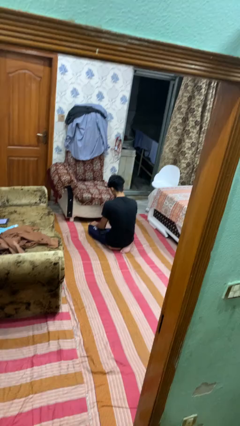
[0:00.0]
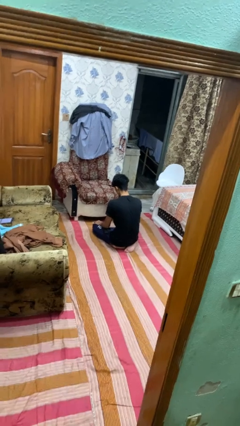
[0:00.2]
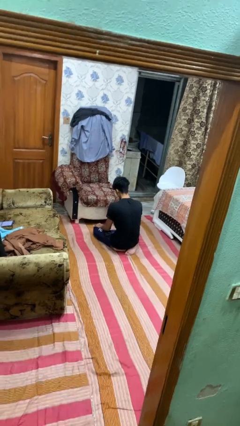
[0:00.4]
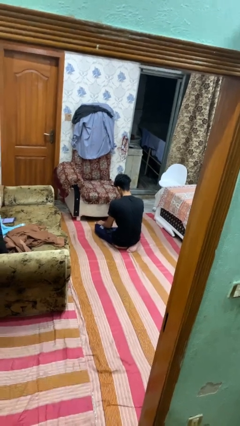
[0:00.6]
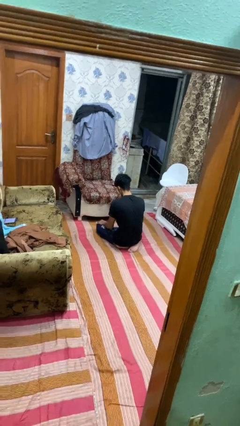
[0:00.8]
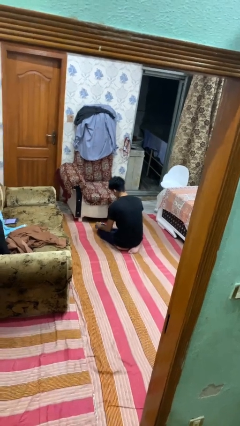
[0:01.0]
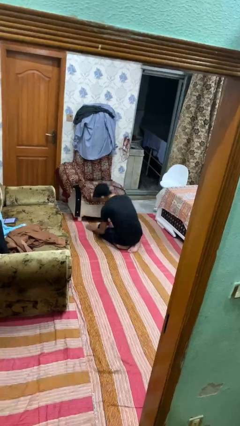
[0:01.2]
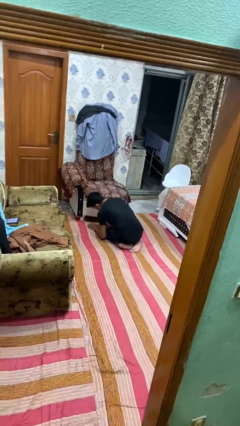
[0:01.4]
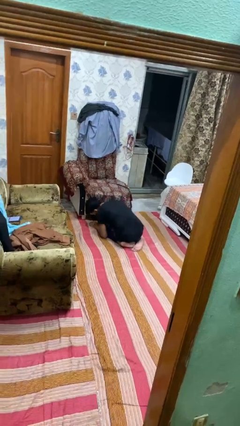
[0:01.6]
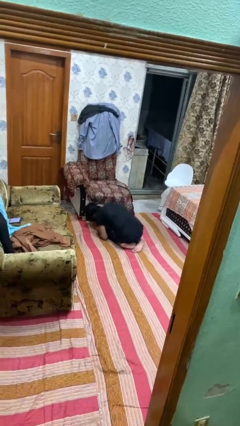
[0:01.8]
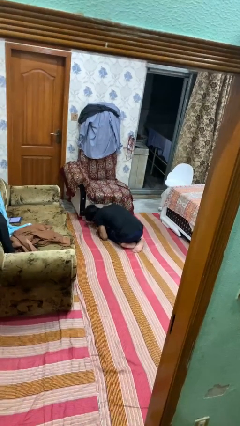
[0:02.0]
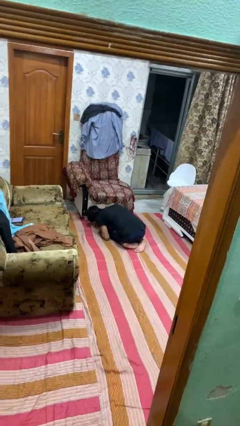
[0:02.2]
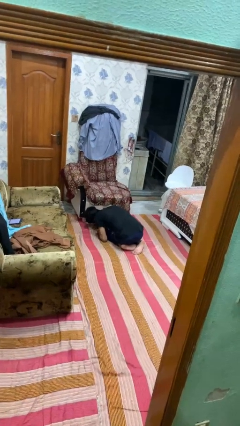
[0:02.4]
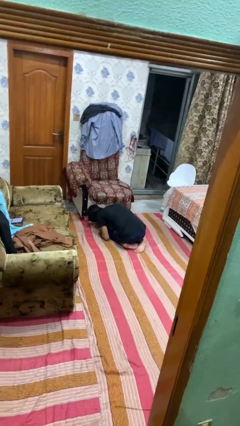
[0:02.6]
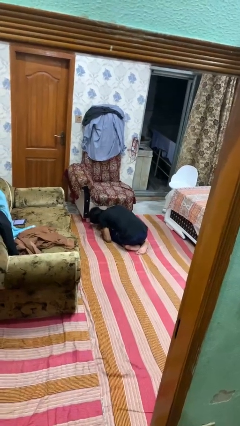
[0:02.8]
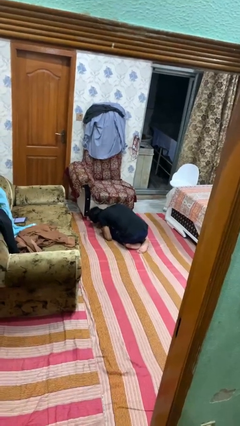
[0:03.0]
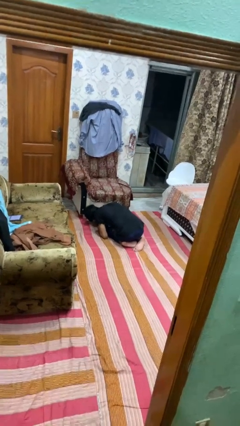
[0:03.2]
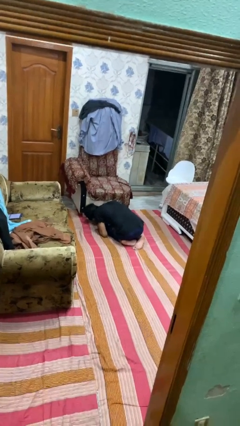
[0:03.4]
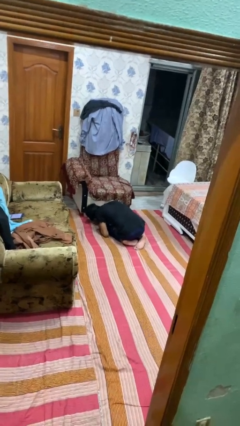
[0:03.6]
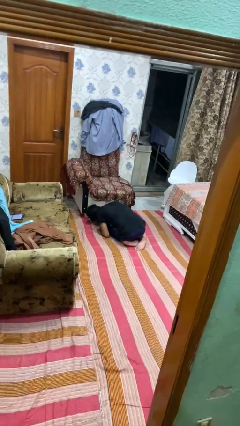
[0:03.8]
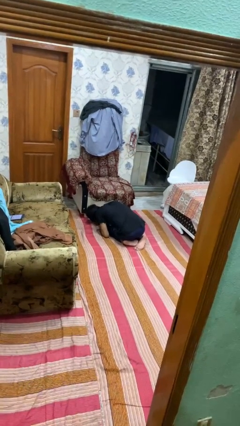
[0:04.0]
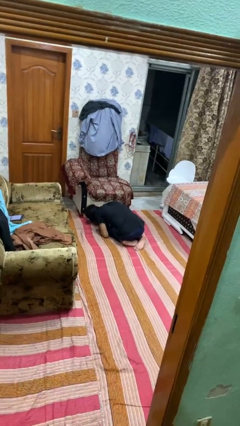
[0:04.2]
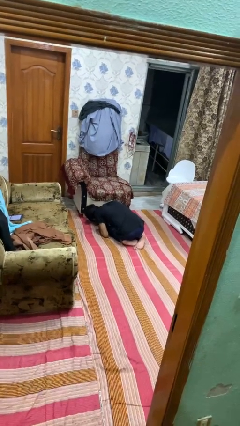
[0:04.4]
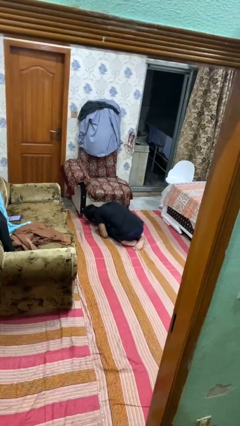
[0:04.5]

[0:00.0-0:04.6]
person searches under couch

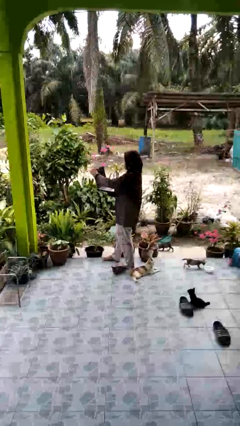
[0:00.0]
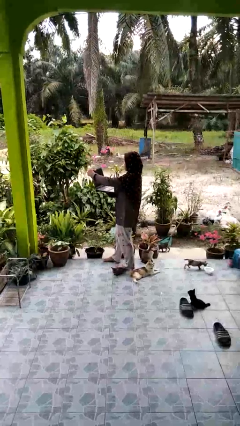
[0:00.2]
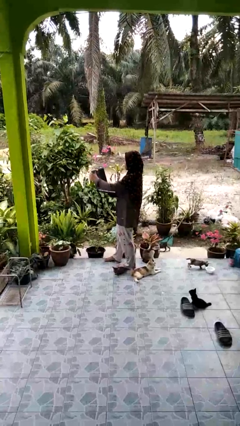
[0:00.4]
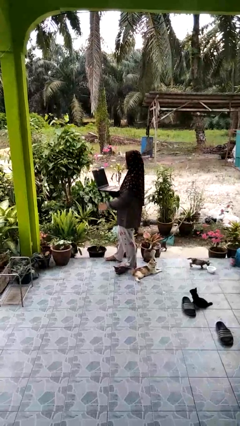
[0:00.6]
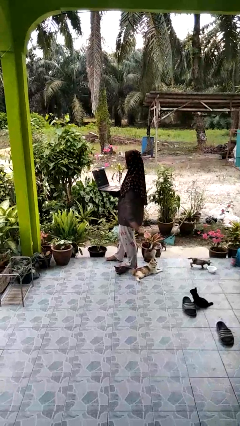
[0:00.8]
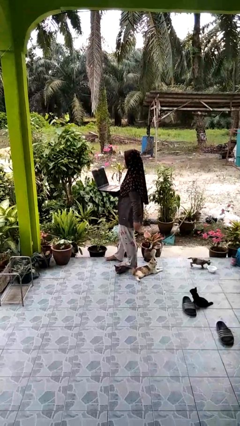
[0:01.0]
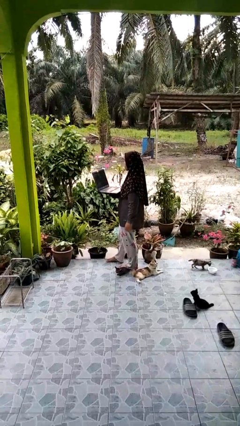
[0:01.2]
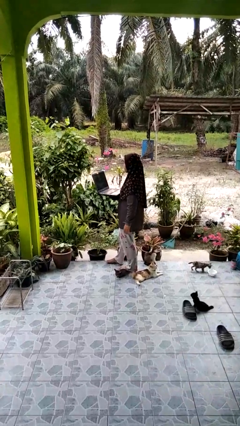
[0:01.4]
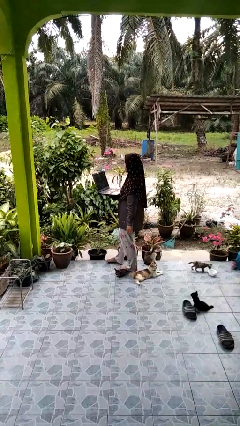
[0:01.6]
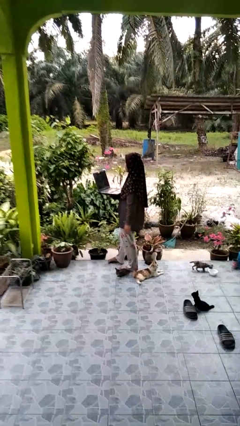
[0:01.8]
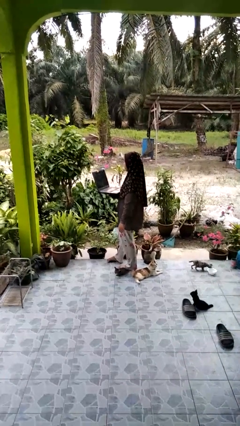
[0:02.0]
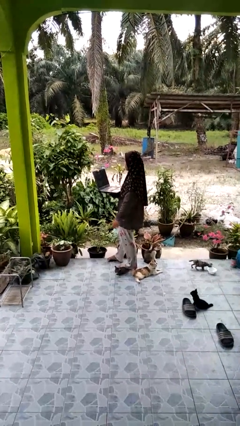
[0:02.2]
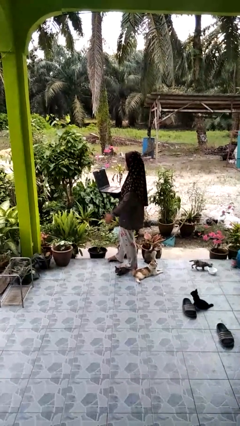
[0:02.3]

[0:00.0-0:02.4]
person opens laptop

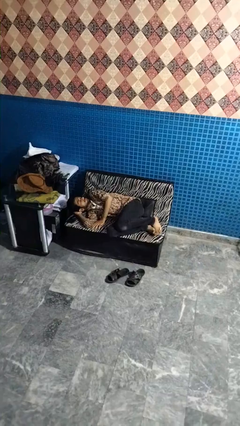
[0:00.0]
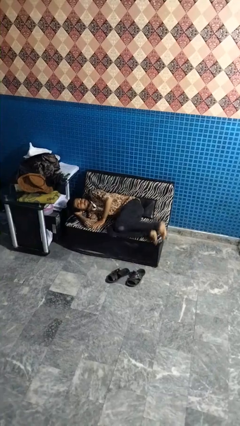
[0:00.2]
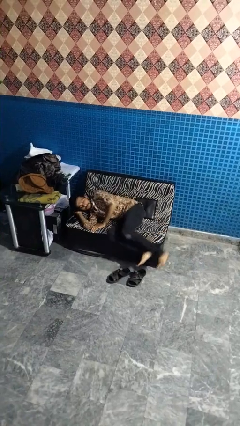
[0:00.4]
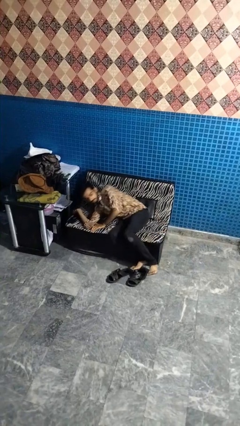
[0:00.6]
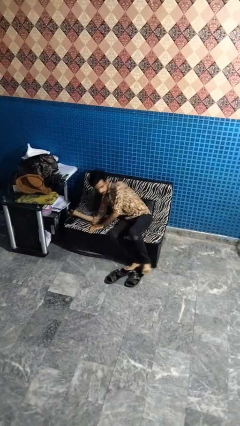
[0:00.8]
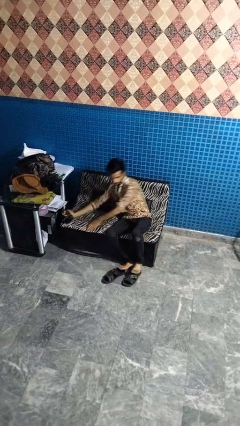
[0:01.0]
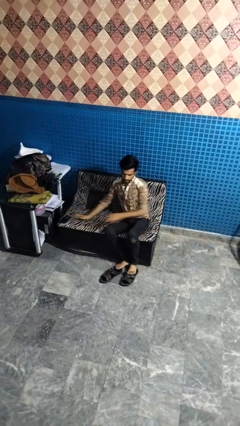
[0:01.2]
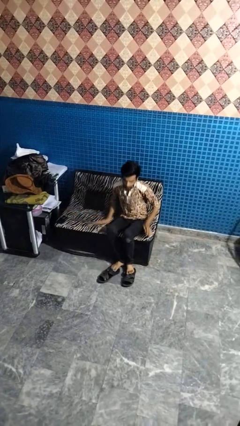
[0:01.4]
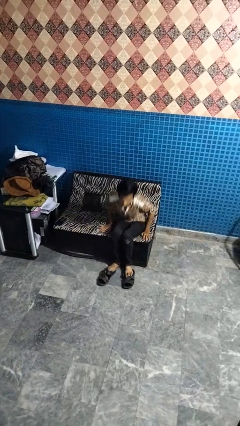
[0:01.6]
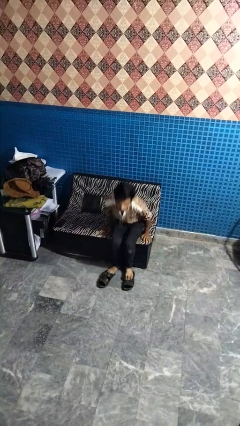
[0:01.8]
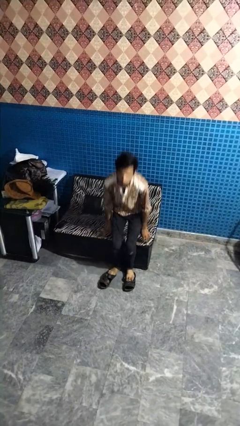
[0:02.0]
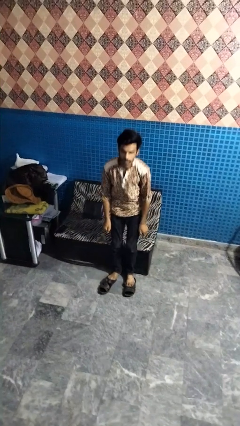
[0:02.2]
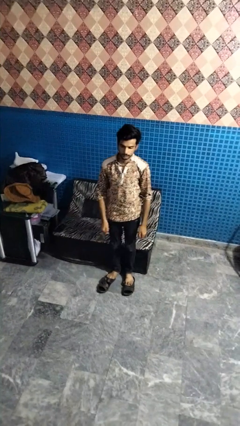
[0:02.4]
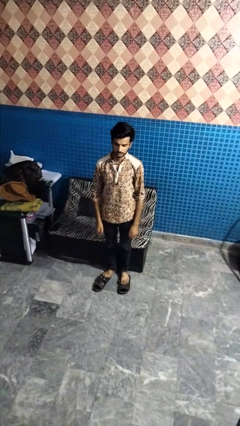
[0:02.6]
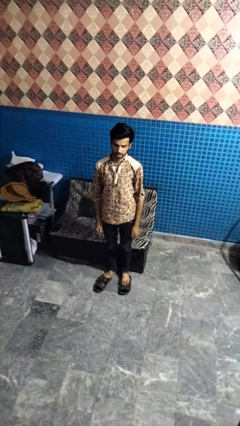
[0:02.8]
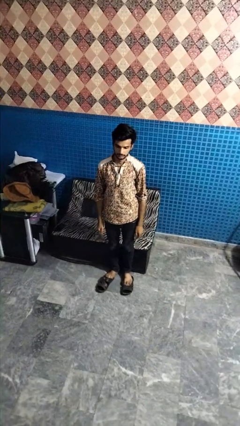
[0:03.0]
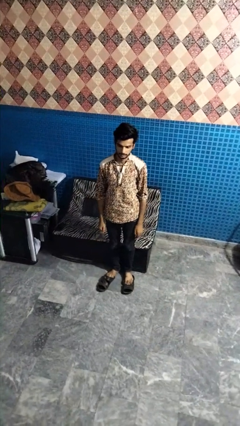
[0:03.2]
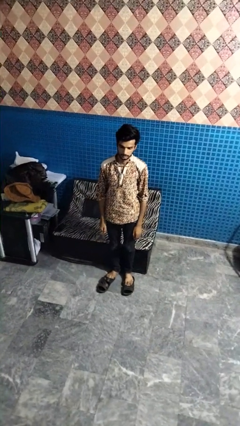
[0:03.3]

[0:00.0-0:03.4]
person stands up

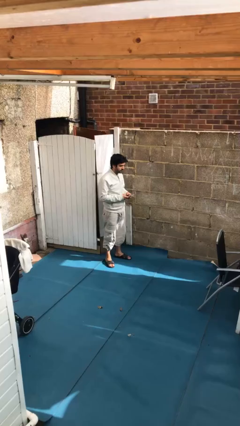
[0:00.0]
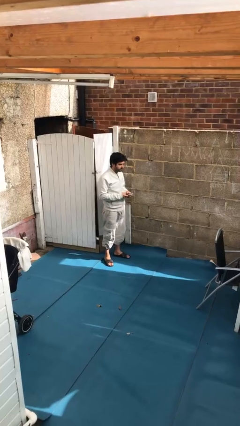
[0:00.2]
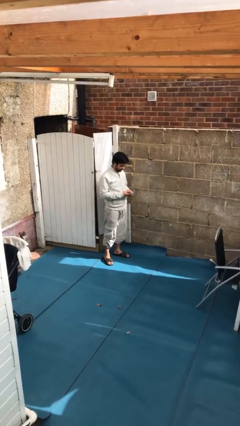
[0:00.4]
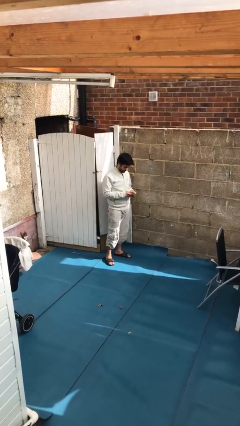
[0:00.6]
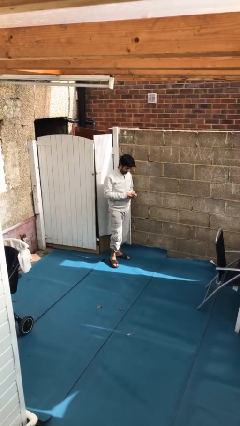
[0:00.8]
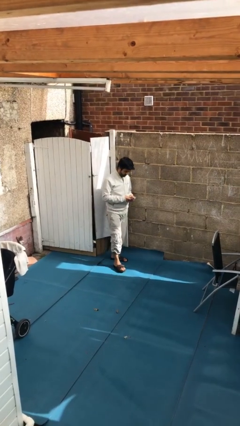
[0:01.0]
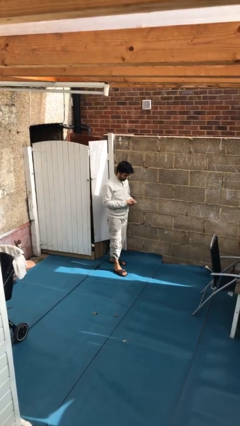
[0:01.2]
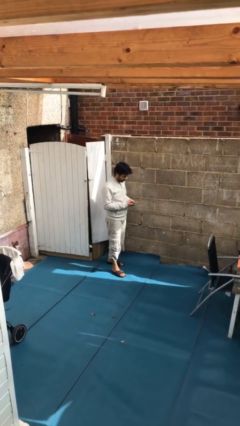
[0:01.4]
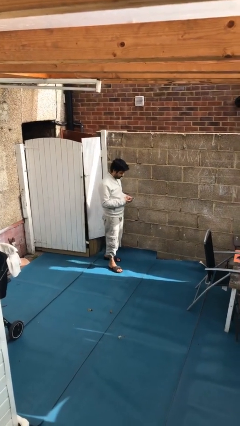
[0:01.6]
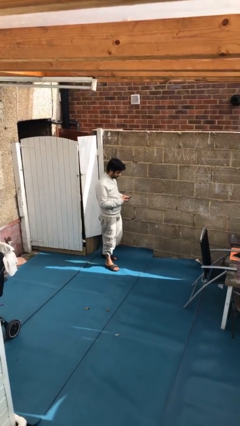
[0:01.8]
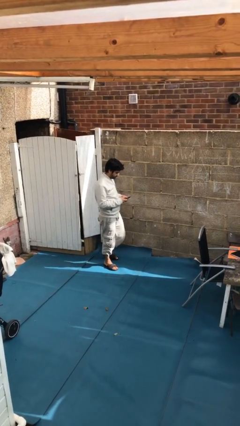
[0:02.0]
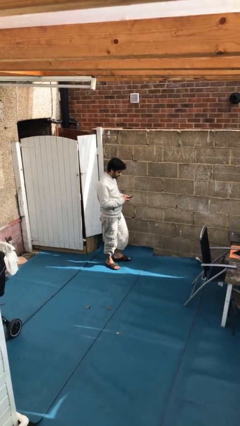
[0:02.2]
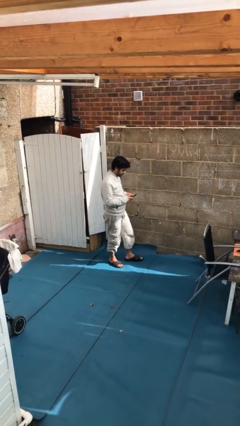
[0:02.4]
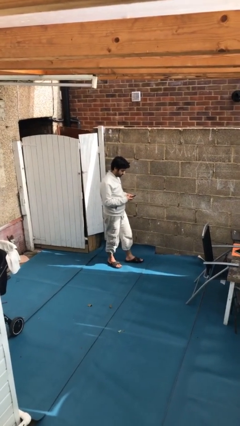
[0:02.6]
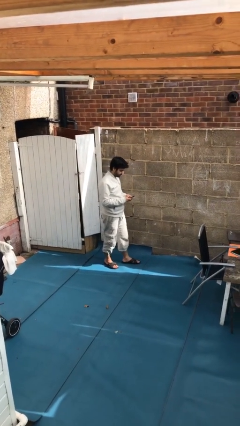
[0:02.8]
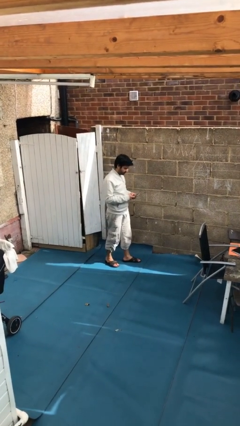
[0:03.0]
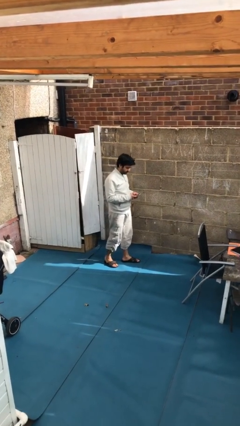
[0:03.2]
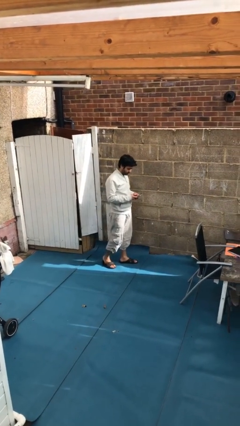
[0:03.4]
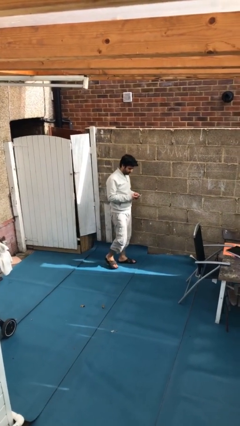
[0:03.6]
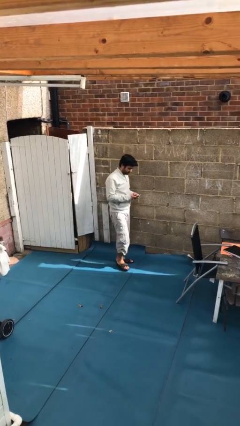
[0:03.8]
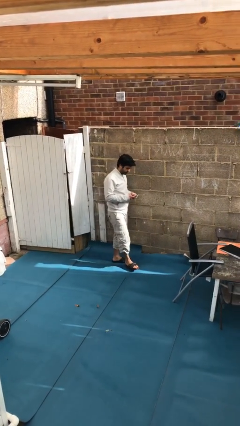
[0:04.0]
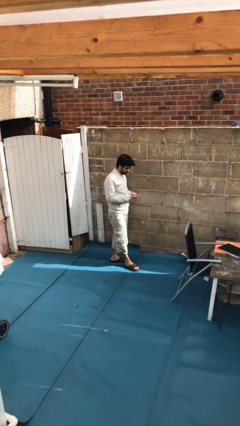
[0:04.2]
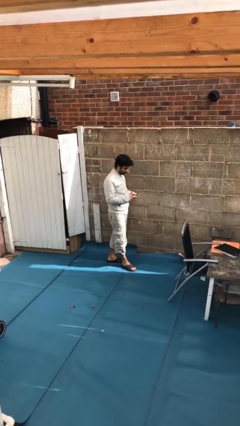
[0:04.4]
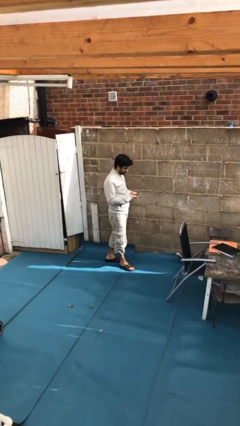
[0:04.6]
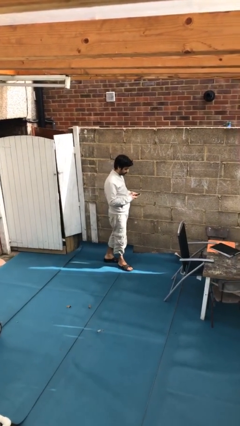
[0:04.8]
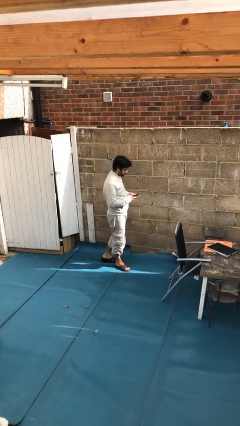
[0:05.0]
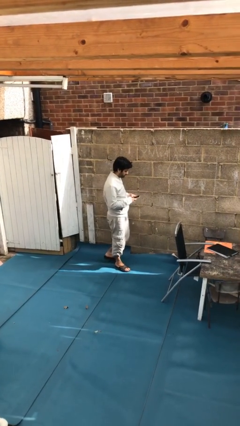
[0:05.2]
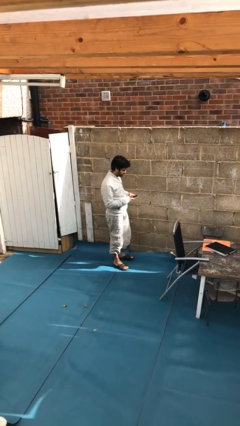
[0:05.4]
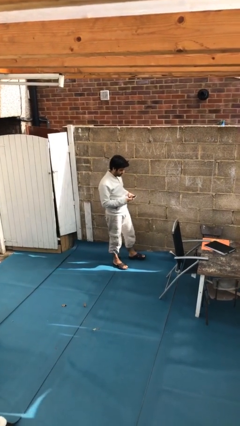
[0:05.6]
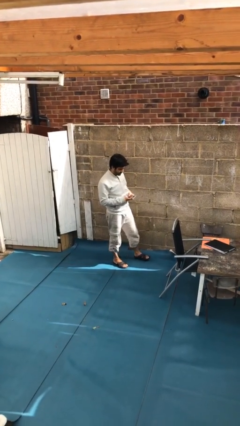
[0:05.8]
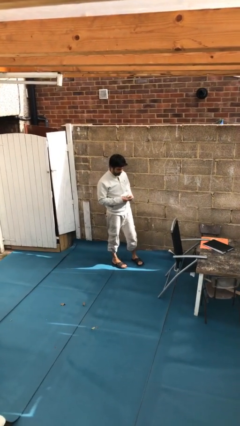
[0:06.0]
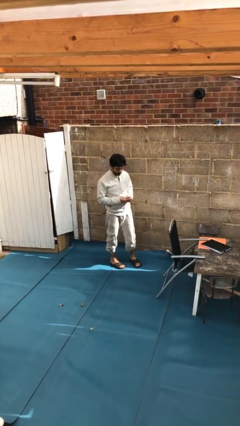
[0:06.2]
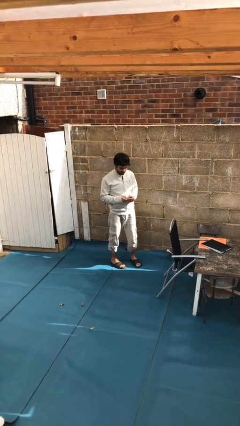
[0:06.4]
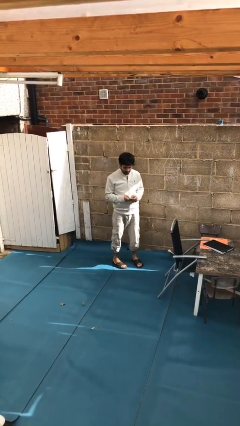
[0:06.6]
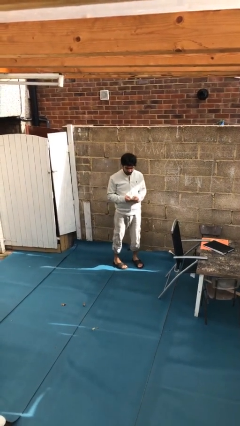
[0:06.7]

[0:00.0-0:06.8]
person texts on phone

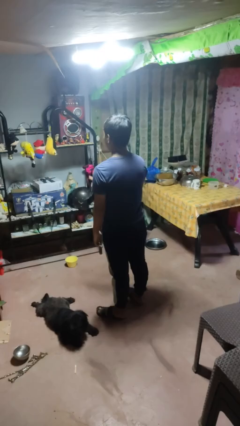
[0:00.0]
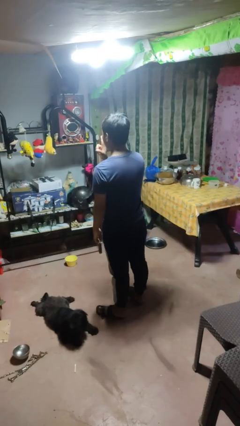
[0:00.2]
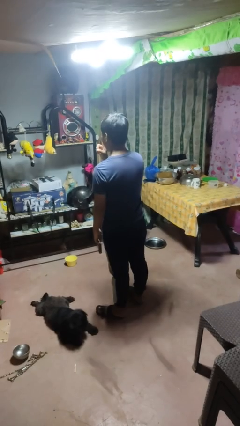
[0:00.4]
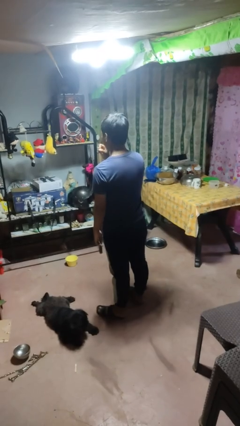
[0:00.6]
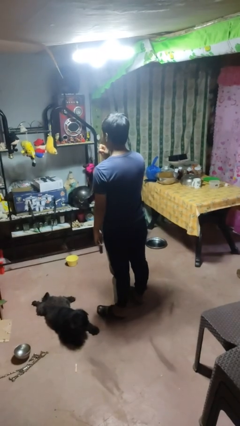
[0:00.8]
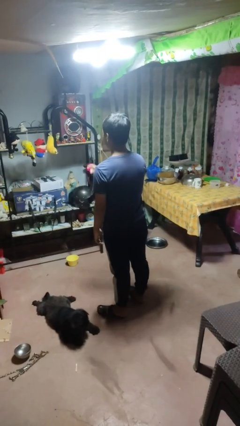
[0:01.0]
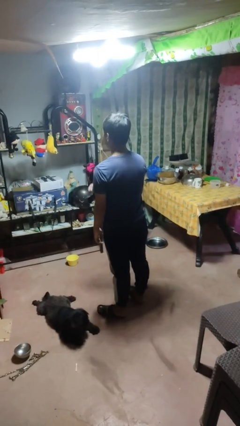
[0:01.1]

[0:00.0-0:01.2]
person gestures be quiet
